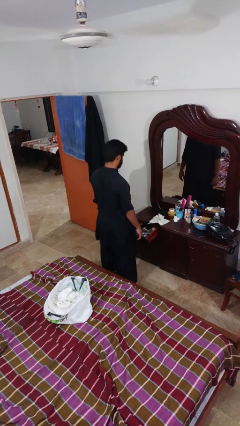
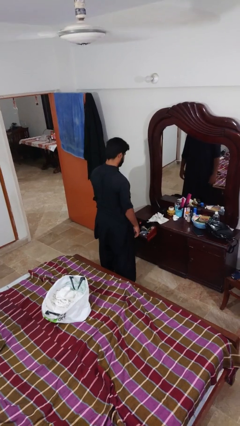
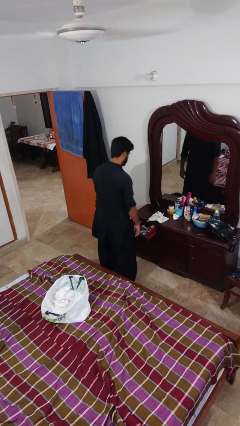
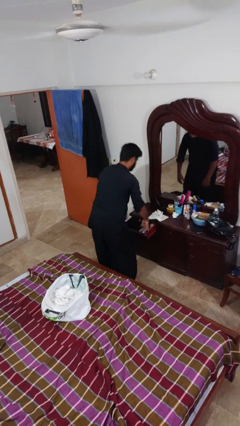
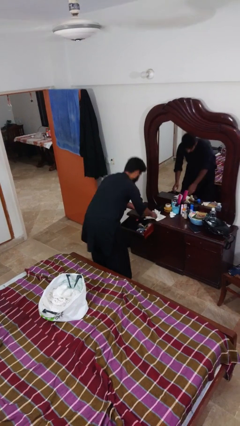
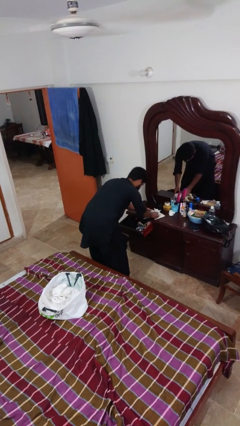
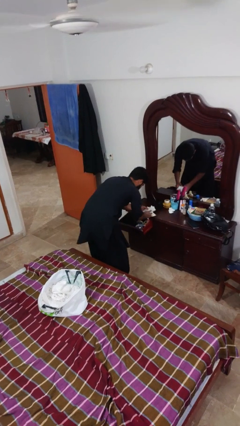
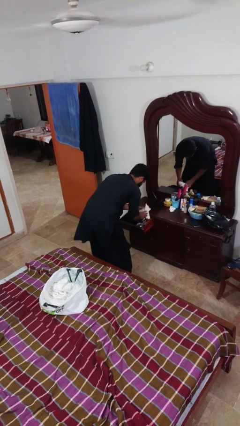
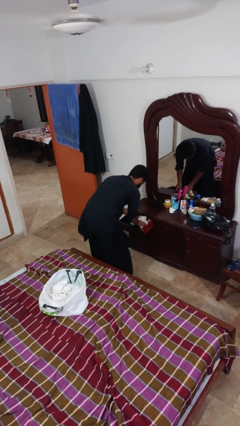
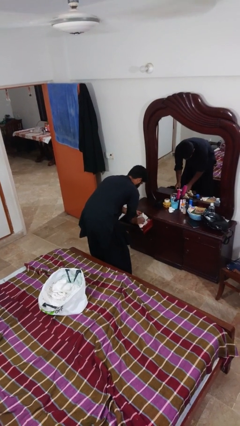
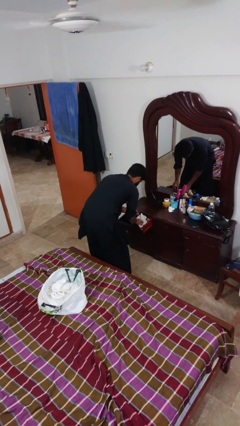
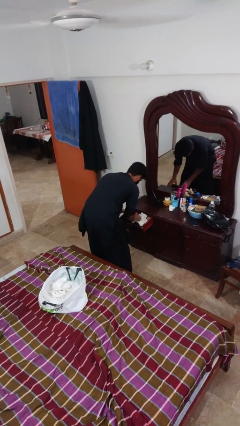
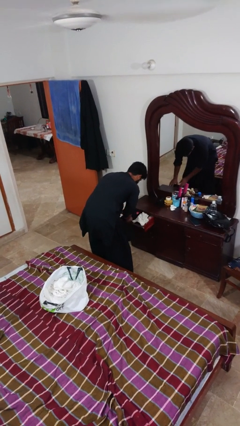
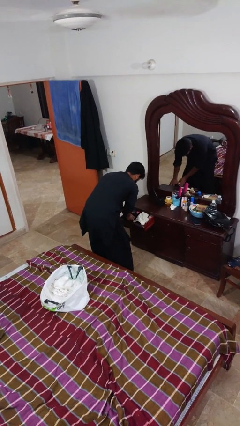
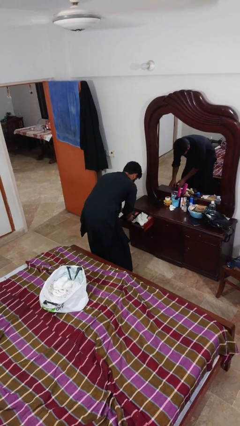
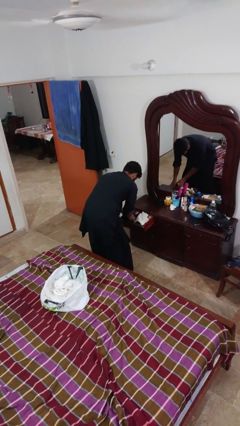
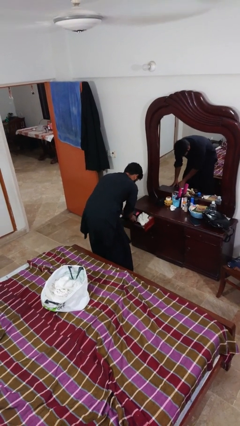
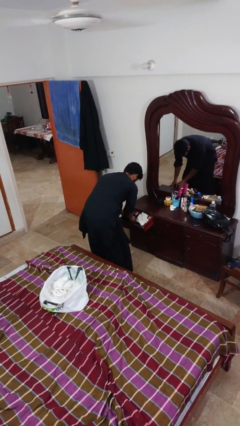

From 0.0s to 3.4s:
person puts clothes into dresser

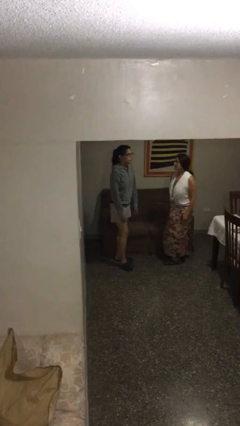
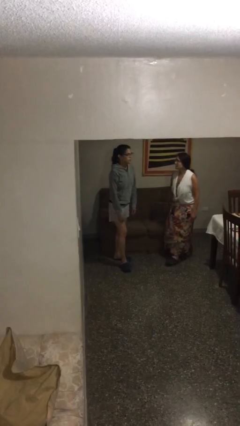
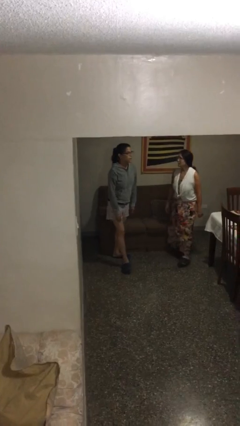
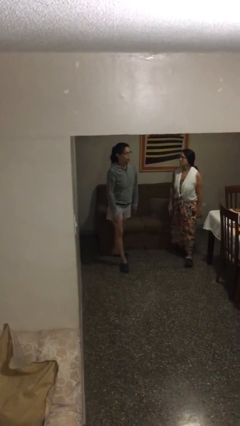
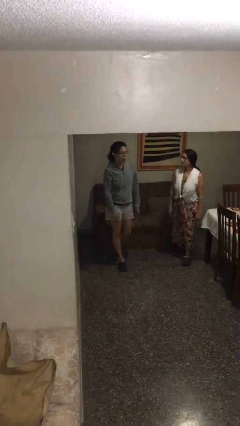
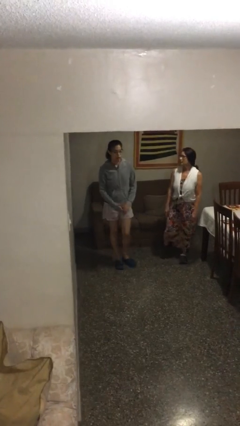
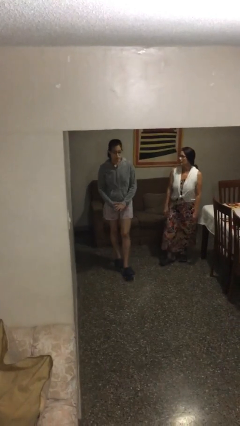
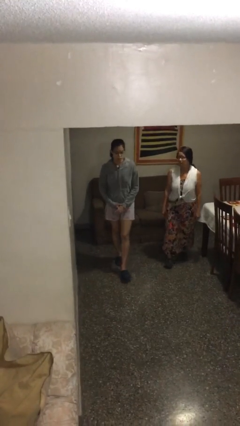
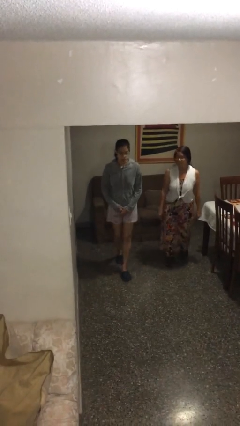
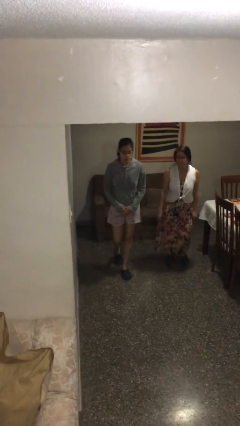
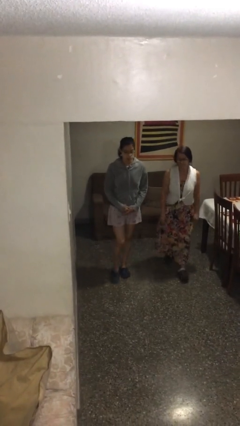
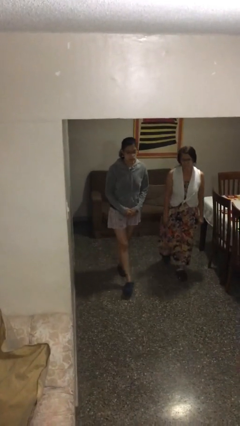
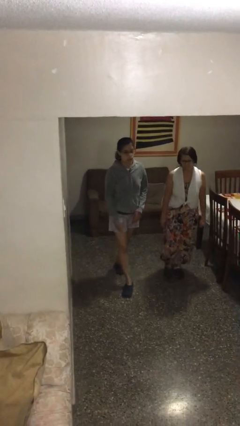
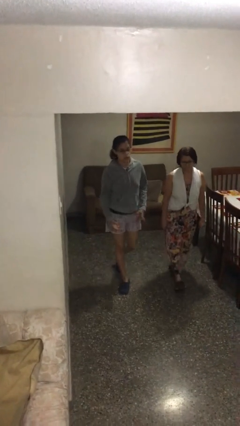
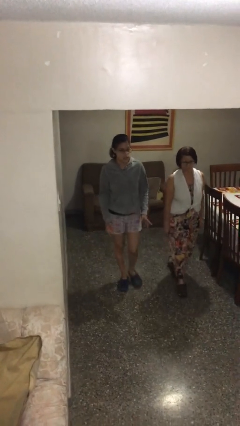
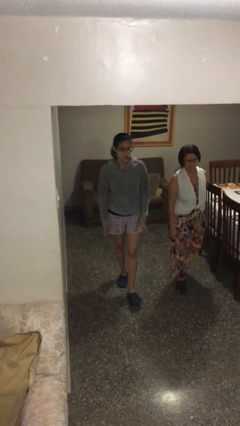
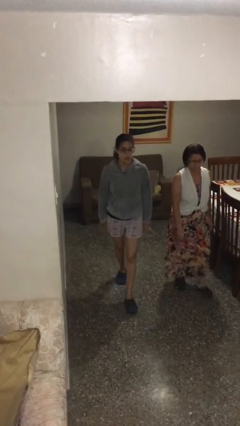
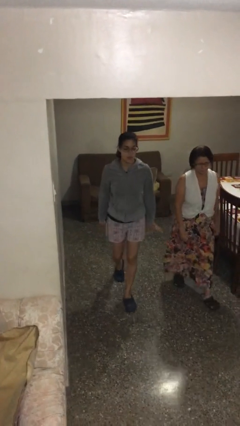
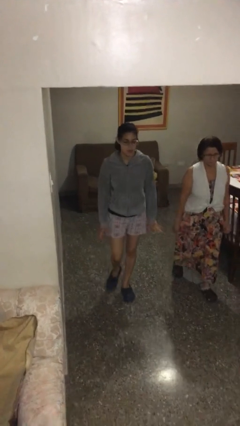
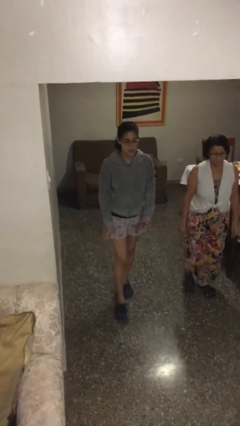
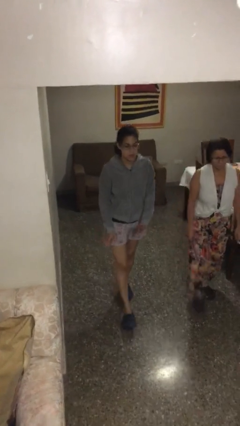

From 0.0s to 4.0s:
person talks to person

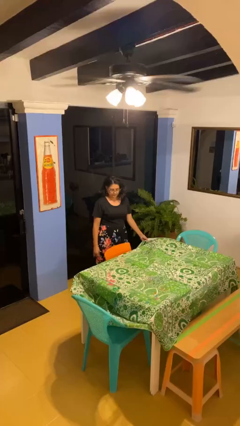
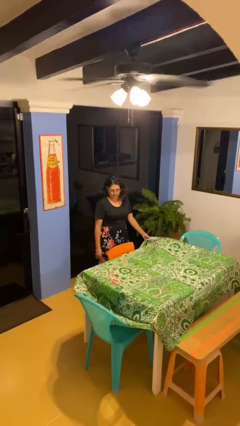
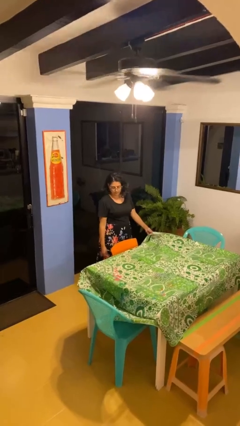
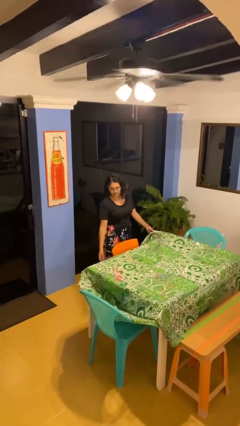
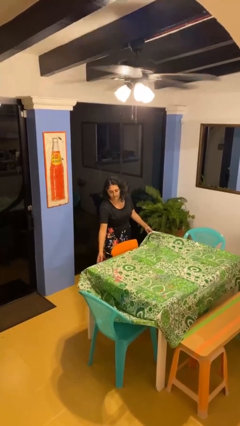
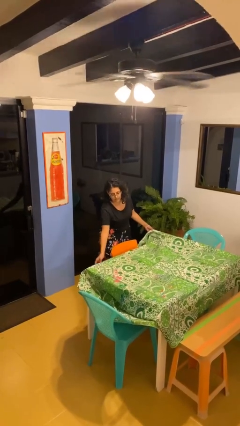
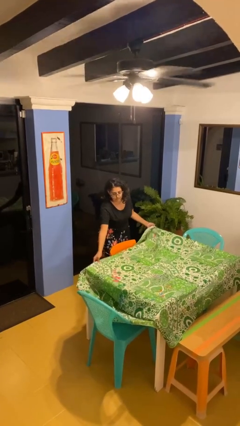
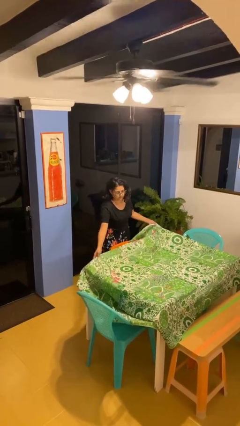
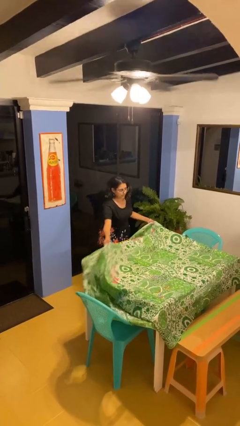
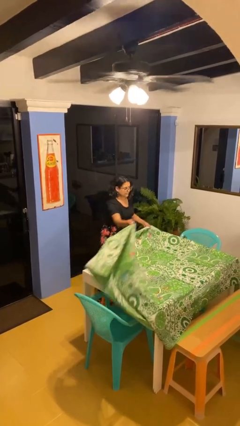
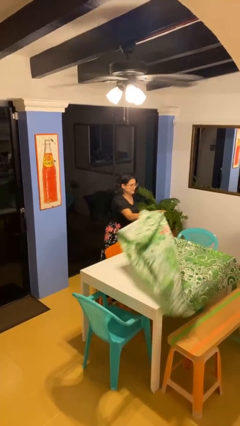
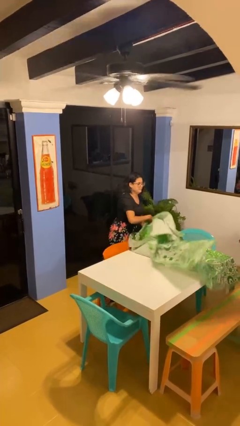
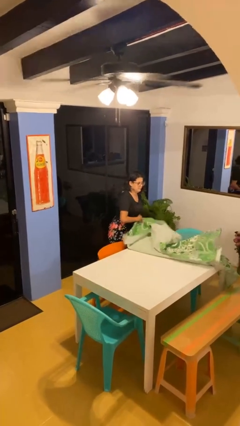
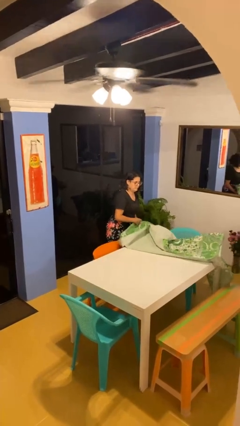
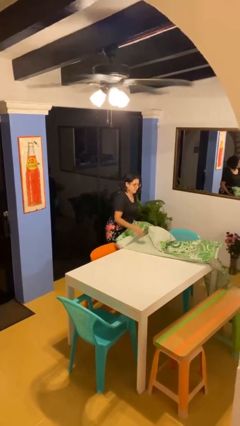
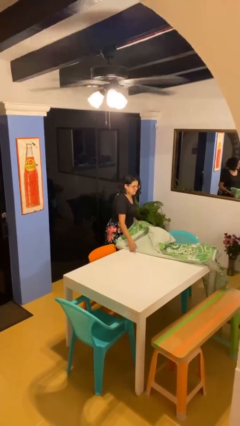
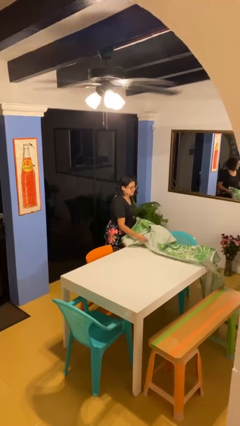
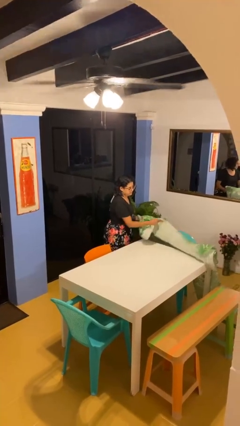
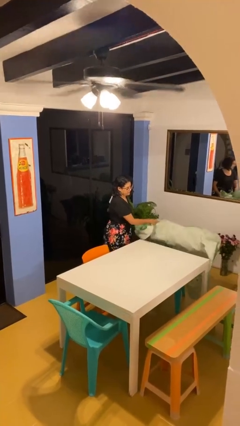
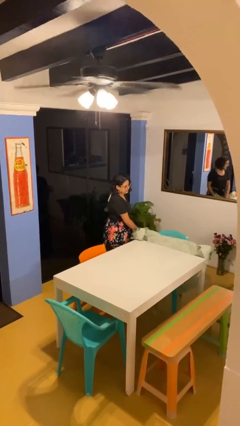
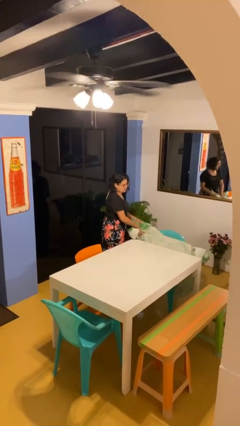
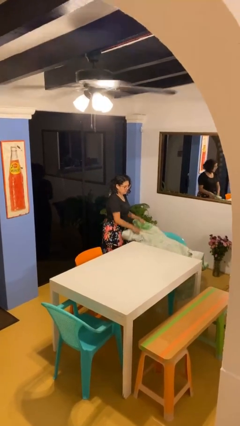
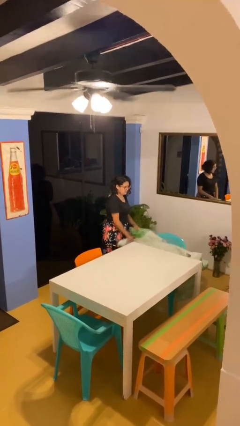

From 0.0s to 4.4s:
person folds tablecloth

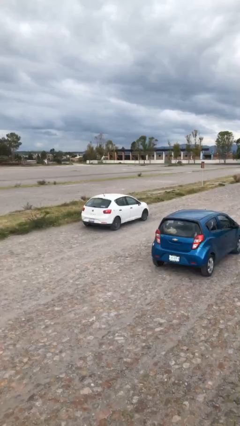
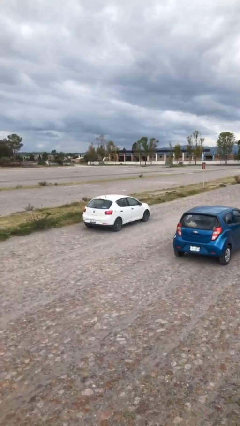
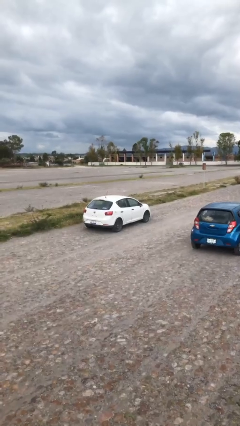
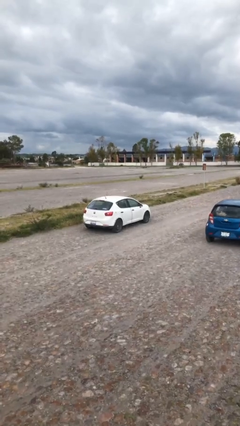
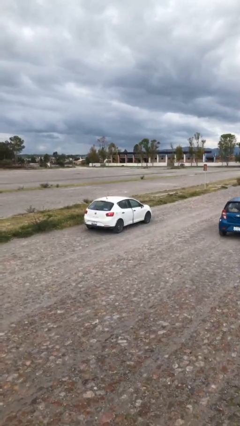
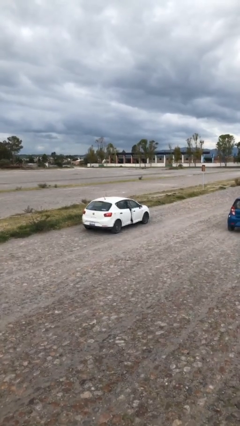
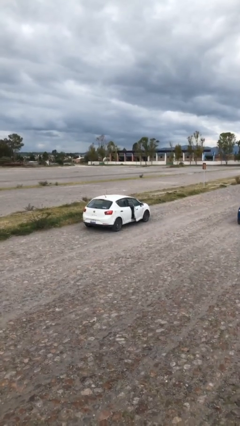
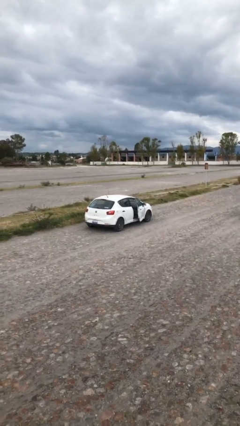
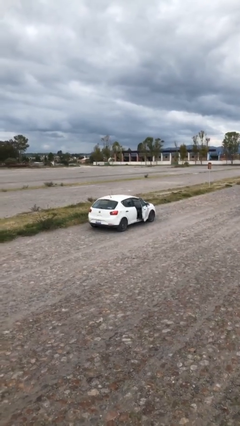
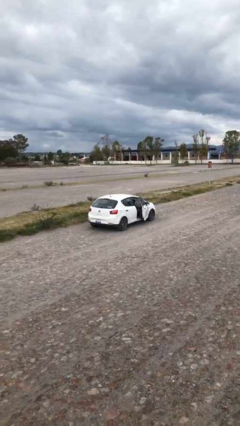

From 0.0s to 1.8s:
car drops off person

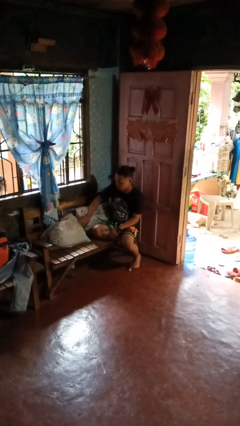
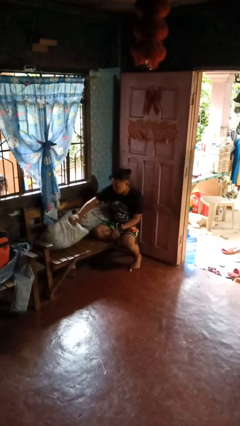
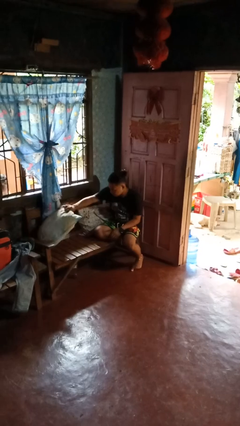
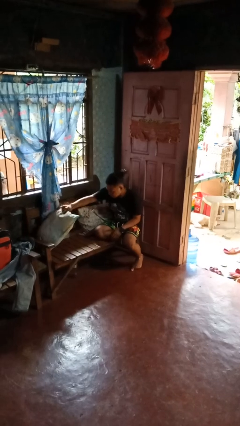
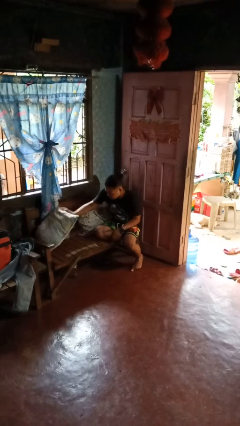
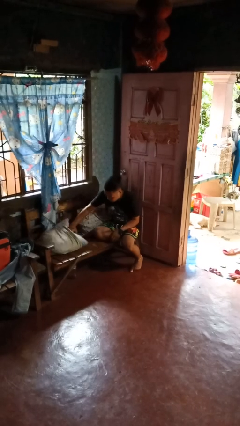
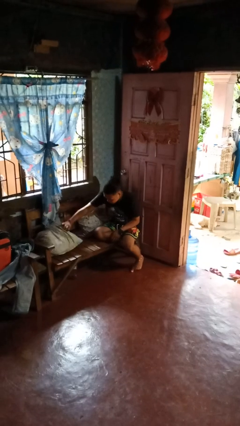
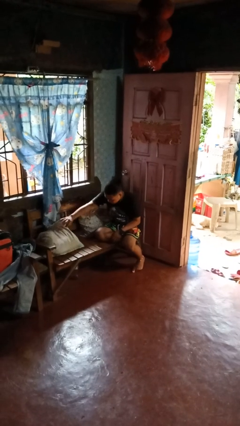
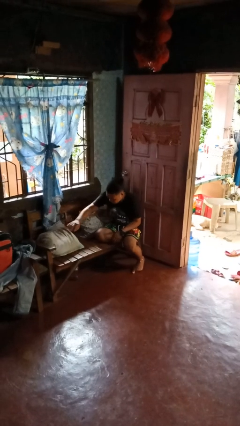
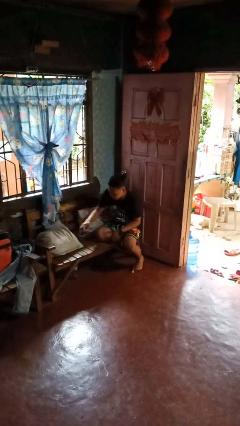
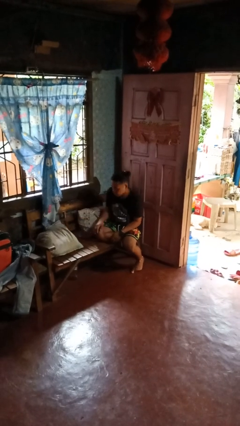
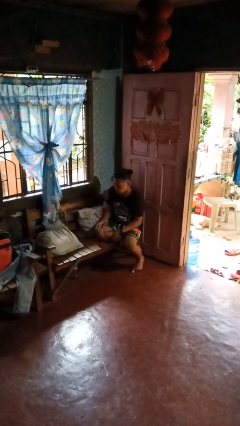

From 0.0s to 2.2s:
person searches in couch

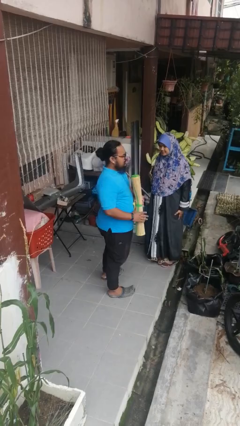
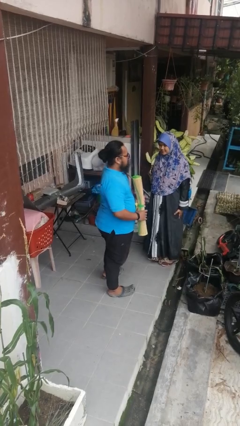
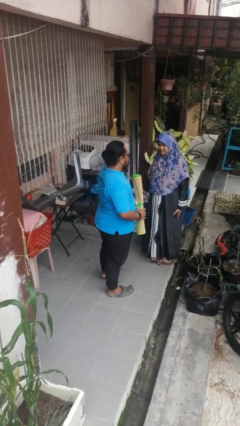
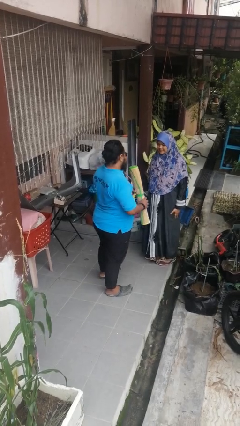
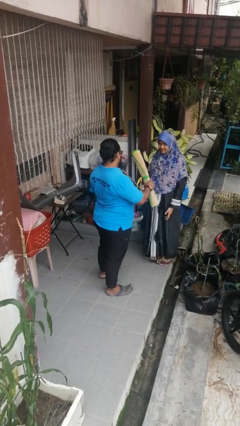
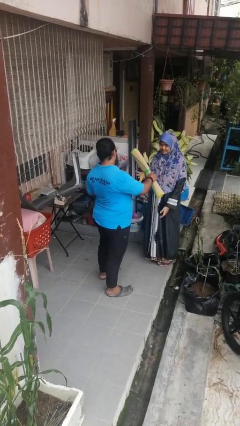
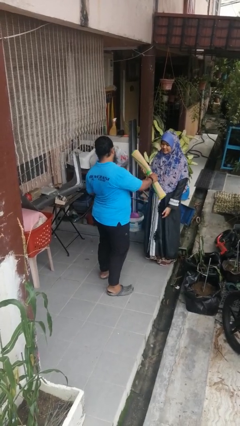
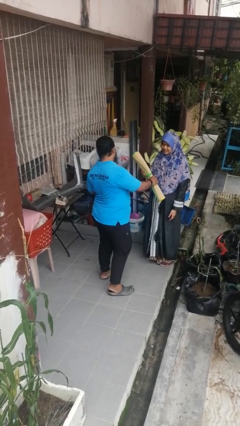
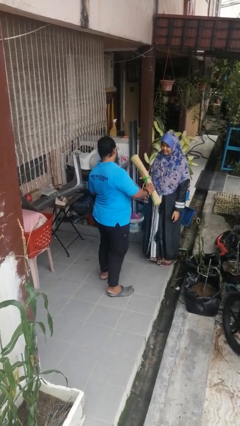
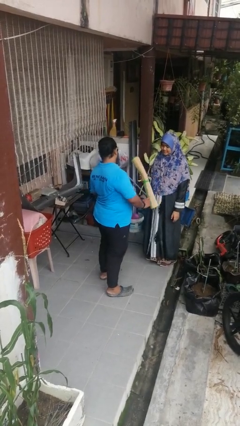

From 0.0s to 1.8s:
person transfers object to person
